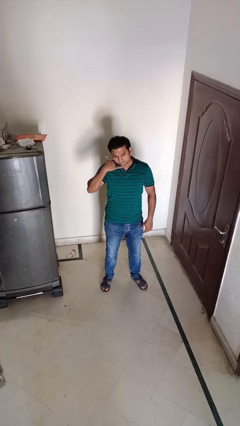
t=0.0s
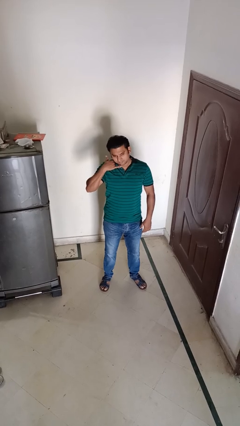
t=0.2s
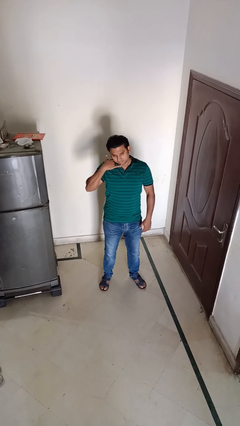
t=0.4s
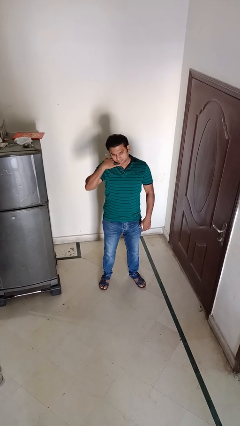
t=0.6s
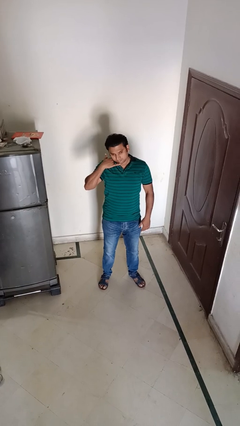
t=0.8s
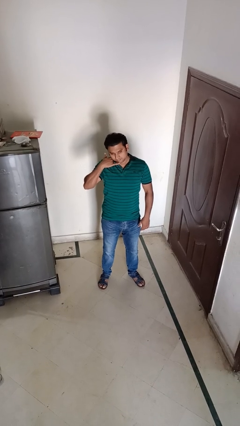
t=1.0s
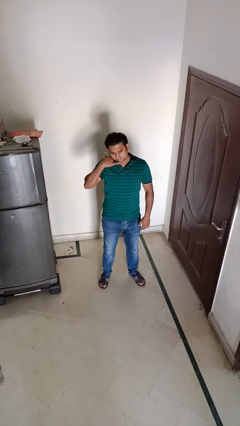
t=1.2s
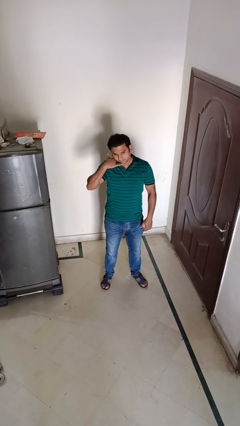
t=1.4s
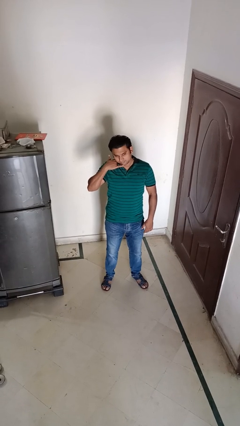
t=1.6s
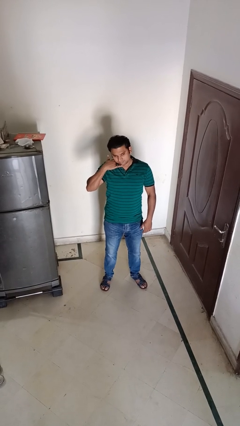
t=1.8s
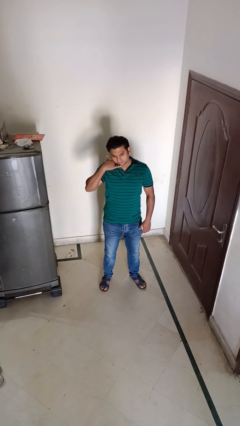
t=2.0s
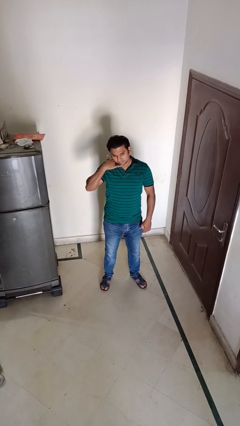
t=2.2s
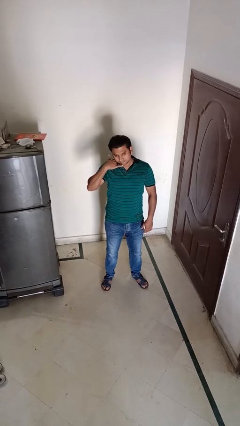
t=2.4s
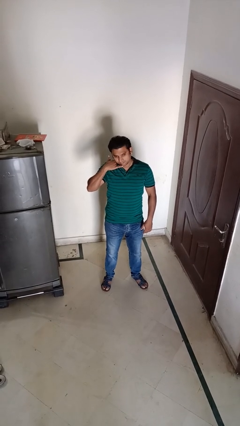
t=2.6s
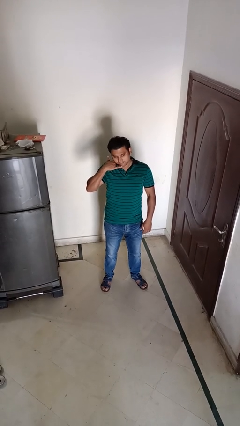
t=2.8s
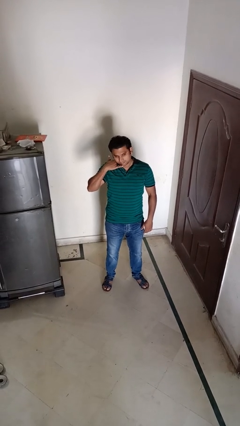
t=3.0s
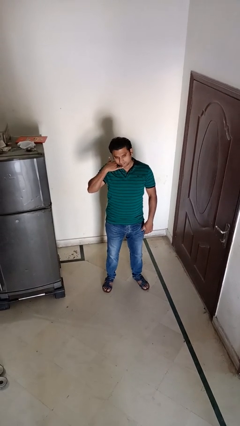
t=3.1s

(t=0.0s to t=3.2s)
person gestures call me

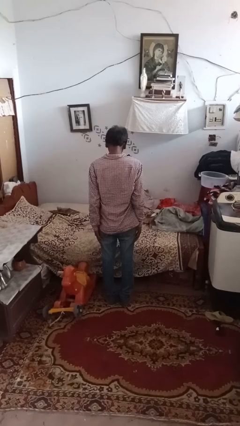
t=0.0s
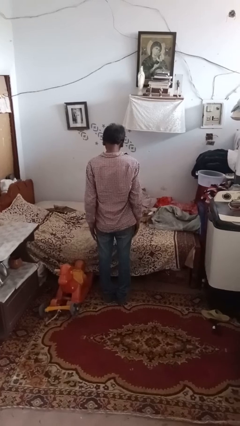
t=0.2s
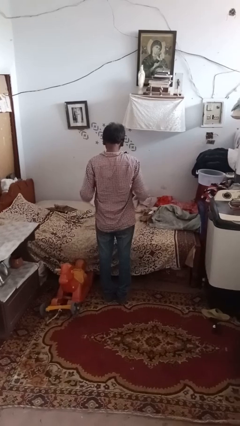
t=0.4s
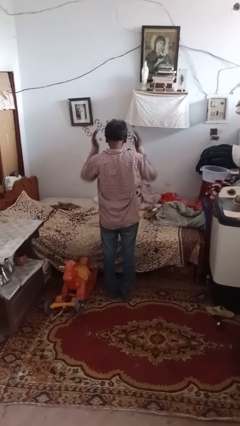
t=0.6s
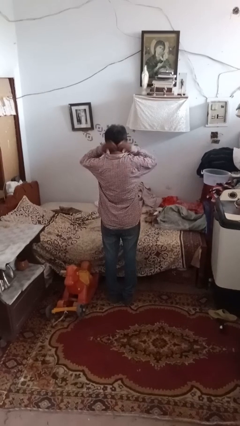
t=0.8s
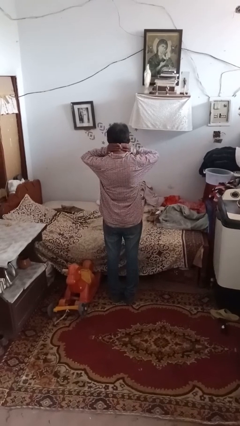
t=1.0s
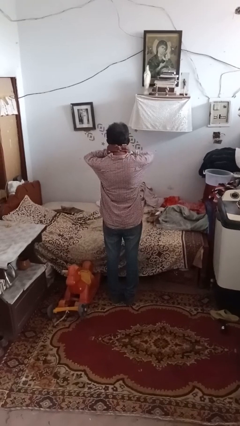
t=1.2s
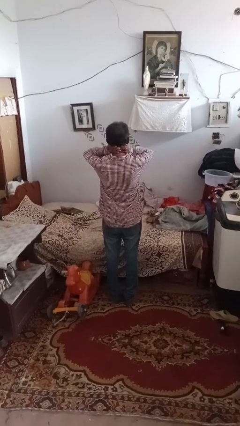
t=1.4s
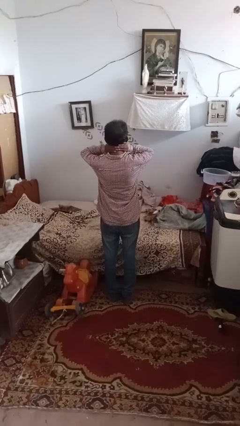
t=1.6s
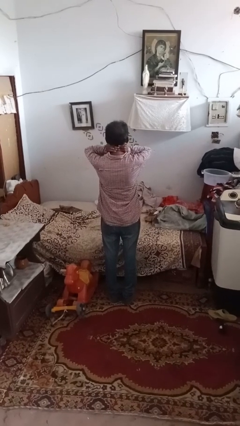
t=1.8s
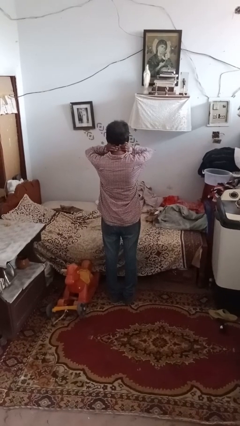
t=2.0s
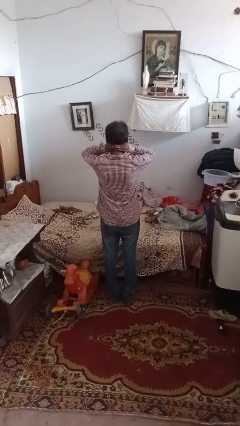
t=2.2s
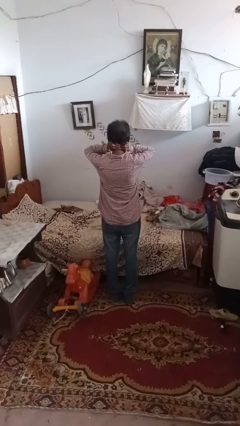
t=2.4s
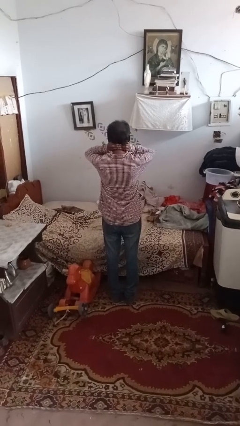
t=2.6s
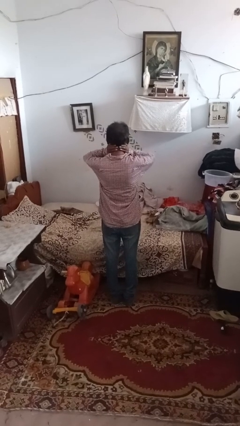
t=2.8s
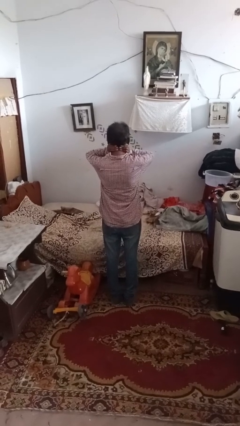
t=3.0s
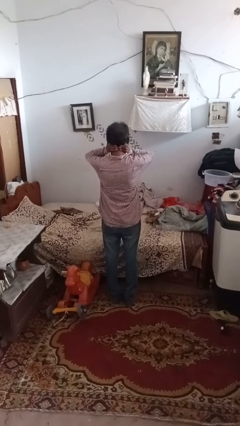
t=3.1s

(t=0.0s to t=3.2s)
person rubs neck

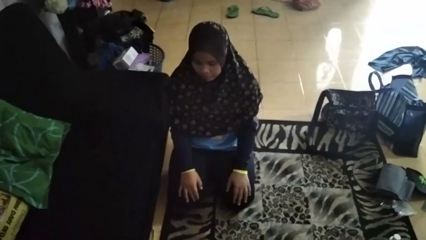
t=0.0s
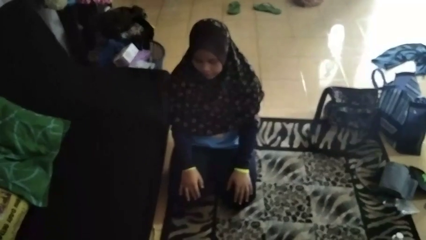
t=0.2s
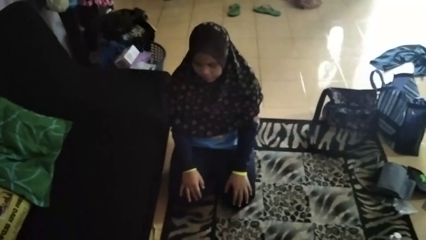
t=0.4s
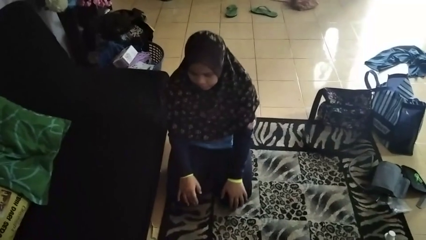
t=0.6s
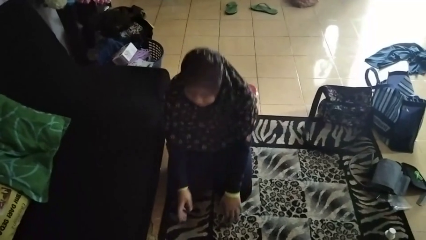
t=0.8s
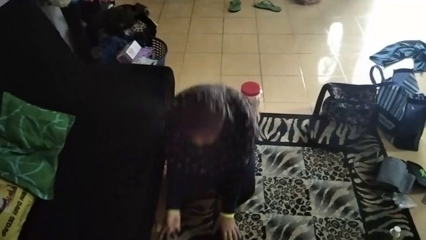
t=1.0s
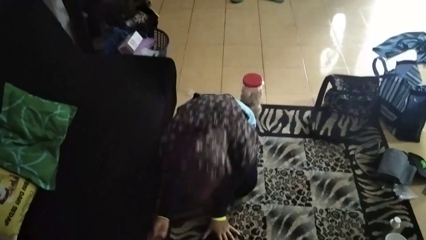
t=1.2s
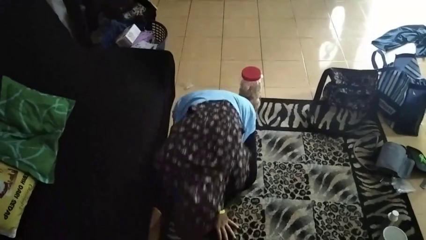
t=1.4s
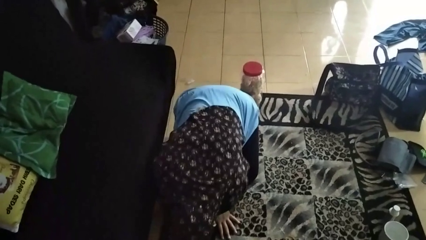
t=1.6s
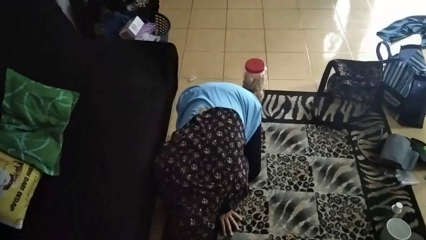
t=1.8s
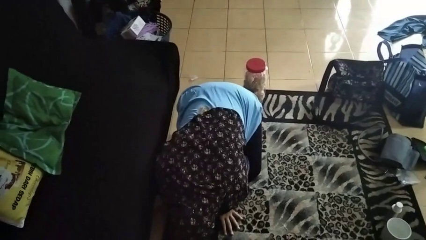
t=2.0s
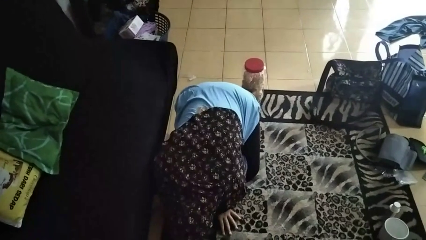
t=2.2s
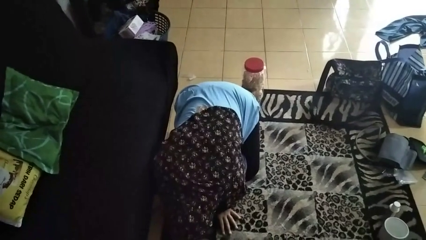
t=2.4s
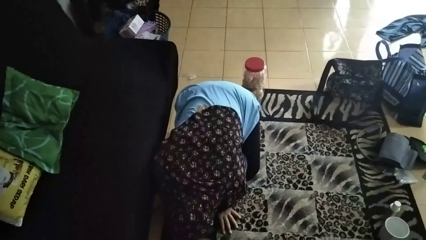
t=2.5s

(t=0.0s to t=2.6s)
person searches under couch

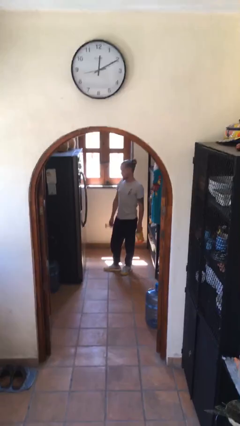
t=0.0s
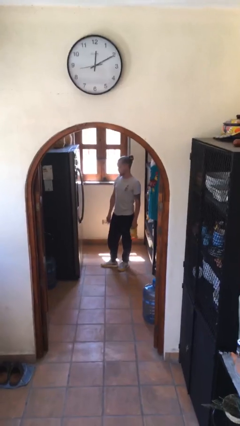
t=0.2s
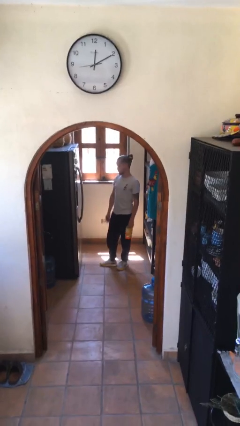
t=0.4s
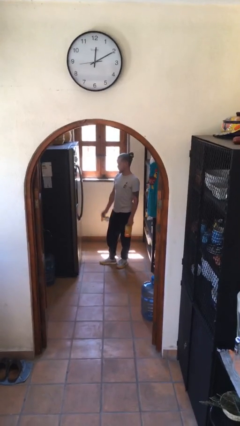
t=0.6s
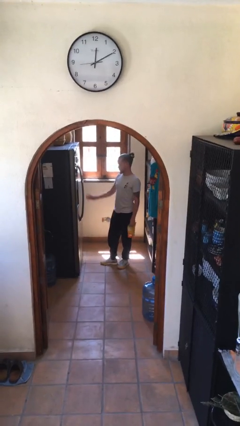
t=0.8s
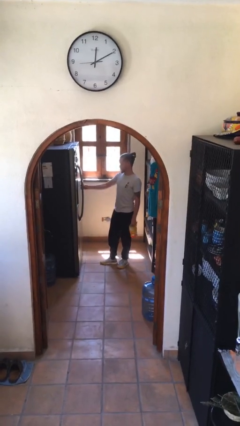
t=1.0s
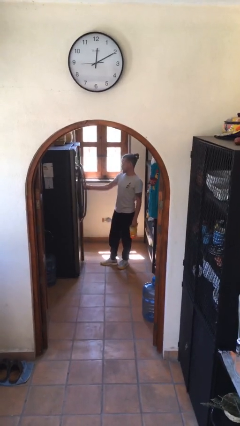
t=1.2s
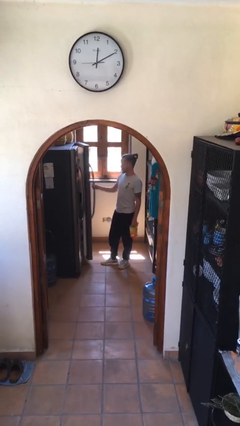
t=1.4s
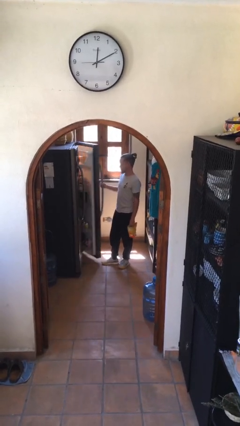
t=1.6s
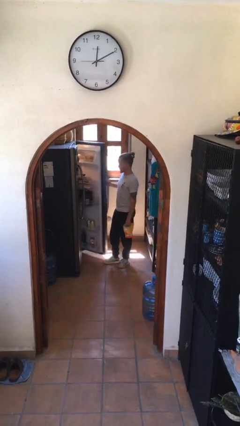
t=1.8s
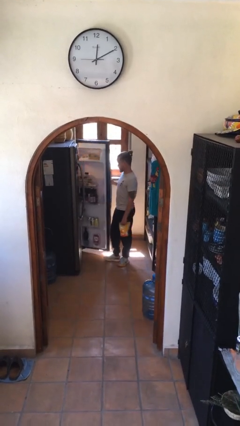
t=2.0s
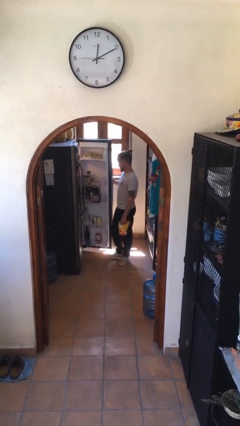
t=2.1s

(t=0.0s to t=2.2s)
person opens refrigerator

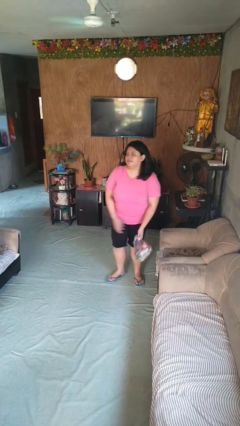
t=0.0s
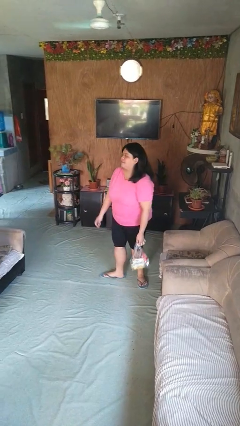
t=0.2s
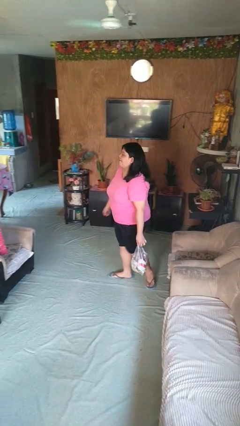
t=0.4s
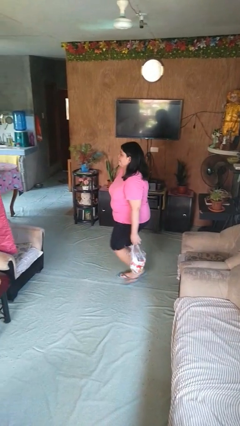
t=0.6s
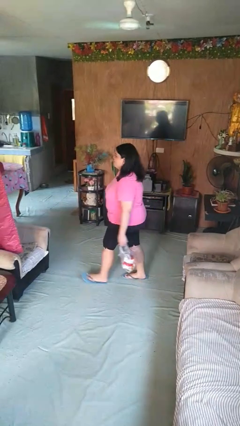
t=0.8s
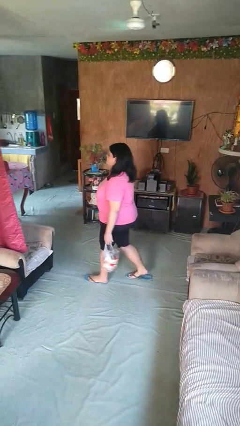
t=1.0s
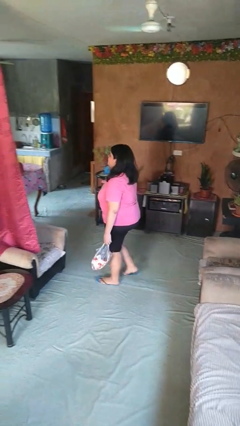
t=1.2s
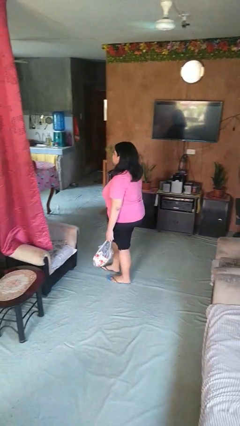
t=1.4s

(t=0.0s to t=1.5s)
person carries groceries

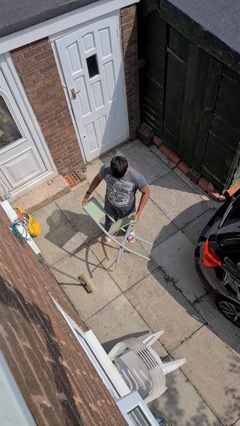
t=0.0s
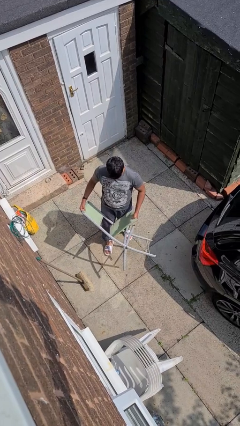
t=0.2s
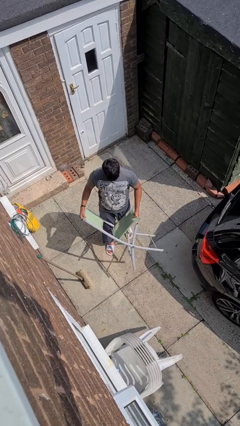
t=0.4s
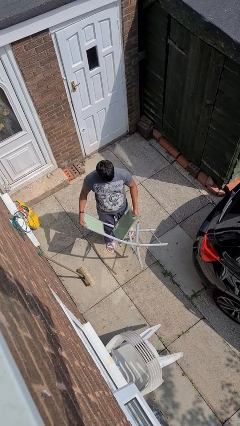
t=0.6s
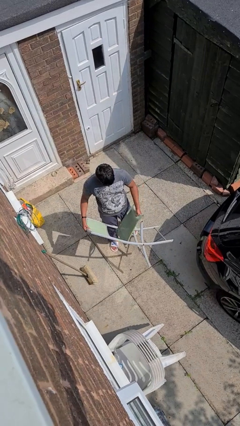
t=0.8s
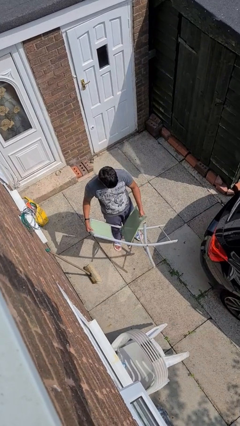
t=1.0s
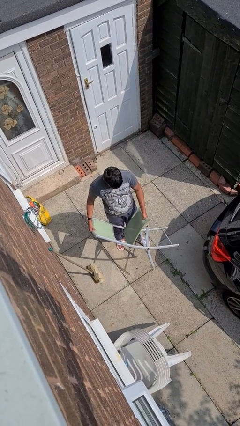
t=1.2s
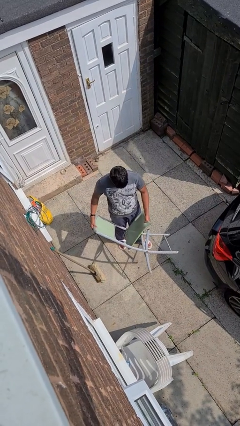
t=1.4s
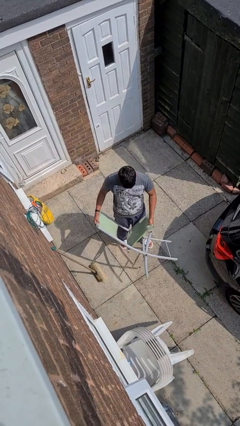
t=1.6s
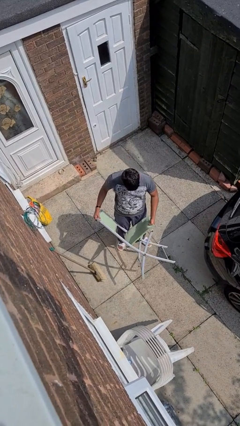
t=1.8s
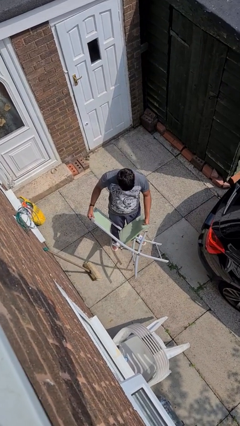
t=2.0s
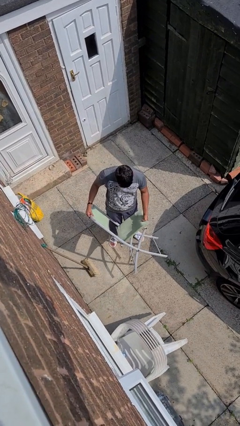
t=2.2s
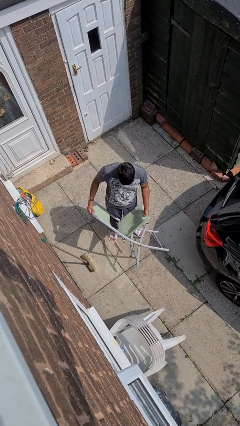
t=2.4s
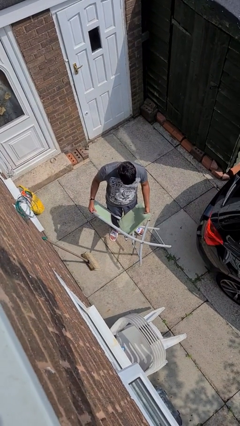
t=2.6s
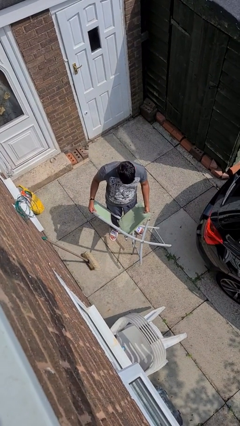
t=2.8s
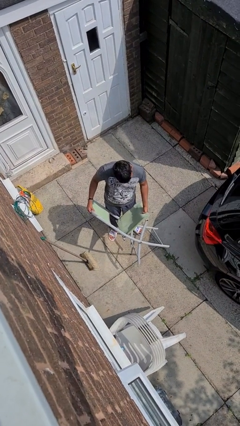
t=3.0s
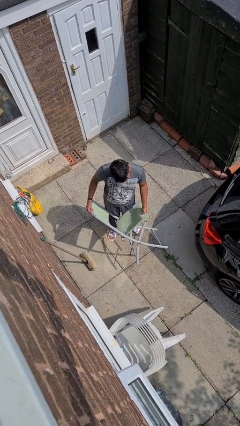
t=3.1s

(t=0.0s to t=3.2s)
person carries furniture

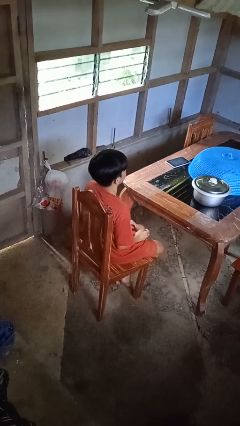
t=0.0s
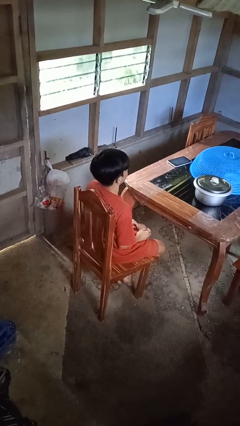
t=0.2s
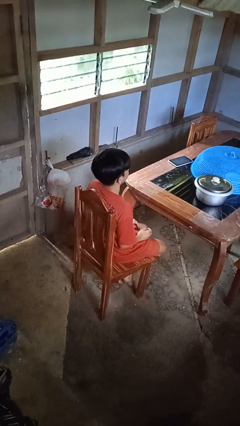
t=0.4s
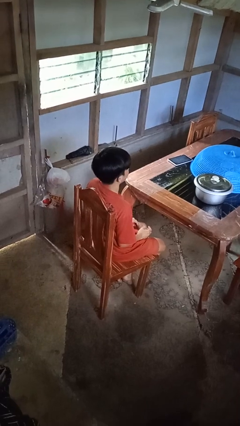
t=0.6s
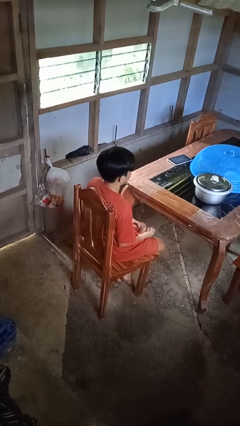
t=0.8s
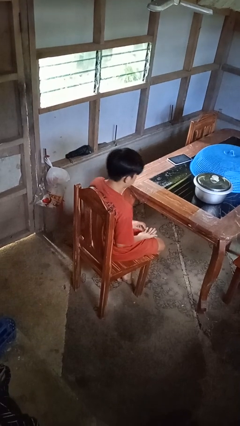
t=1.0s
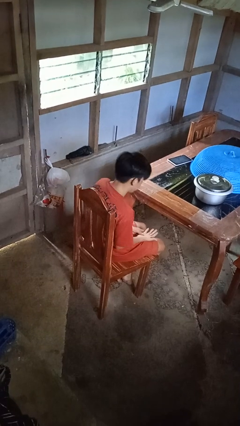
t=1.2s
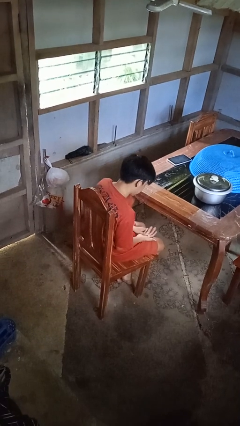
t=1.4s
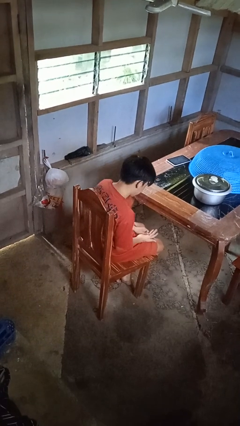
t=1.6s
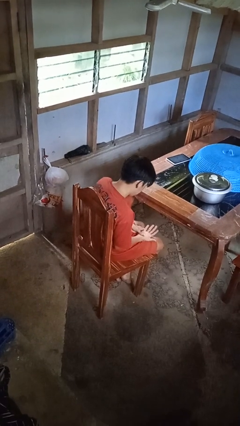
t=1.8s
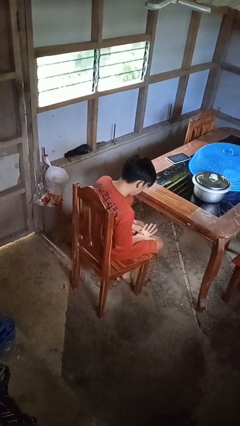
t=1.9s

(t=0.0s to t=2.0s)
person looks at hands in lap
